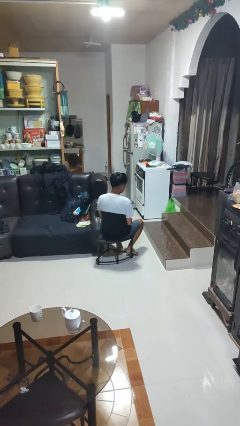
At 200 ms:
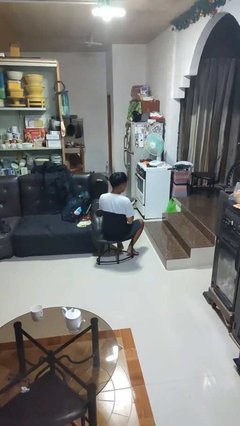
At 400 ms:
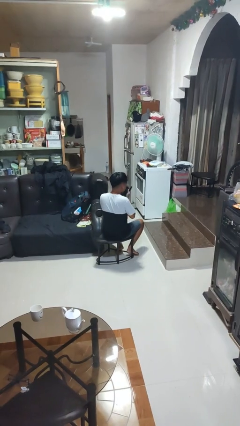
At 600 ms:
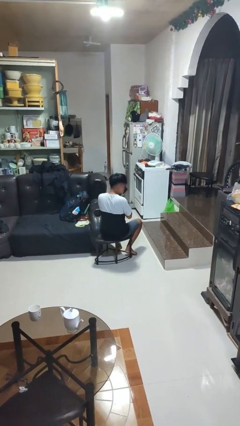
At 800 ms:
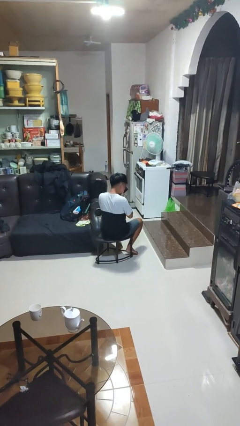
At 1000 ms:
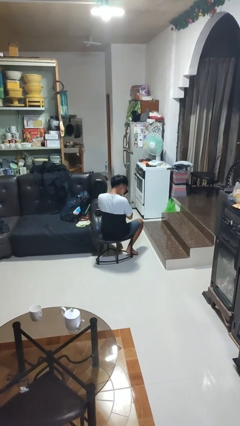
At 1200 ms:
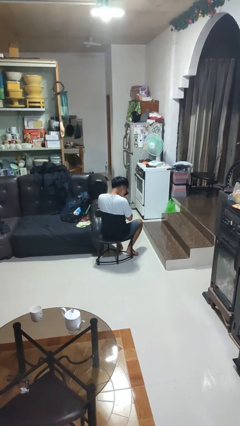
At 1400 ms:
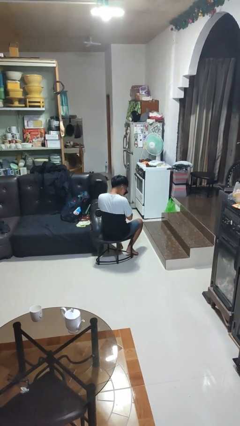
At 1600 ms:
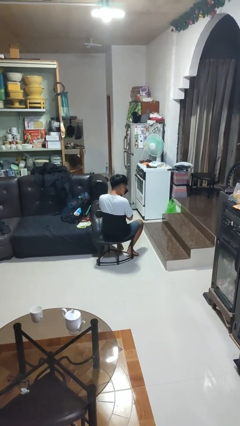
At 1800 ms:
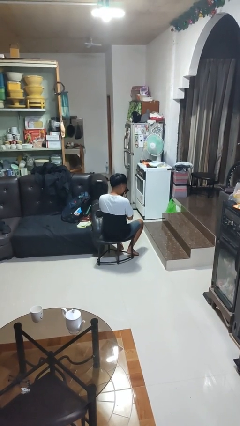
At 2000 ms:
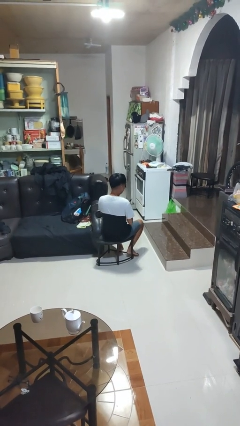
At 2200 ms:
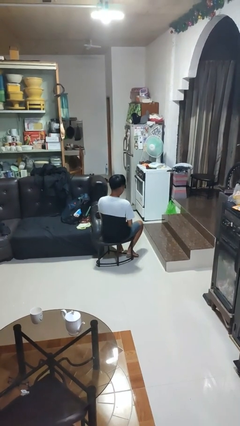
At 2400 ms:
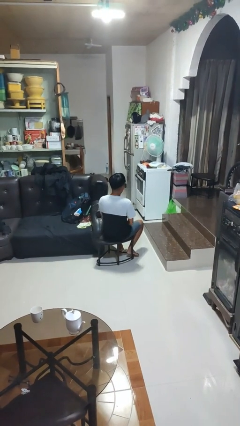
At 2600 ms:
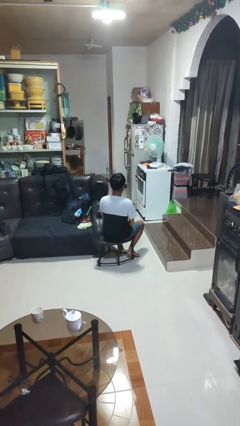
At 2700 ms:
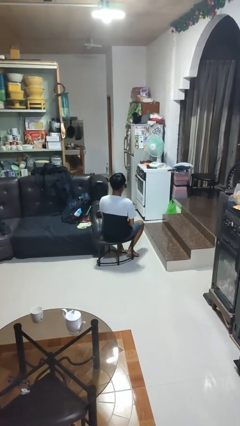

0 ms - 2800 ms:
person blows nose

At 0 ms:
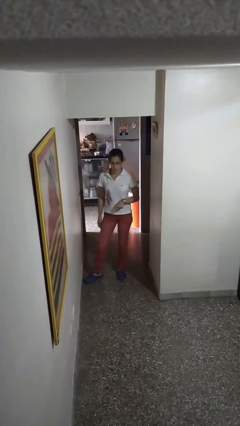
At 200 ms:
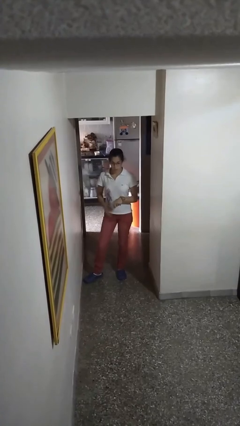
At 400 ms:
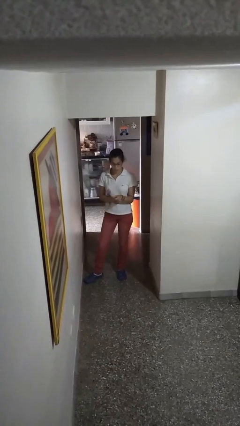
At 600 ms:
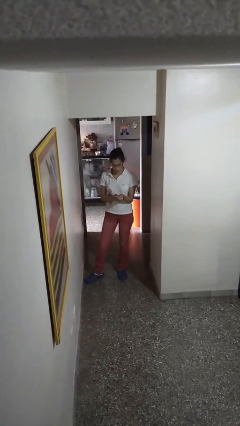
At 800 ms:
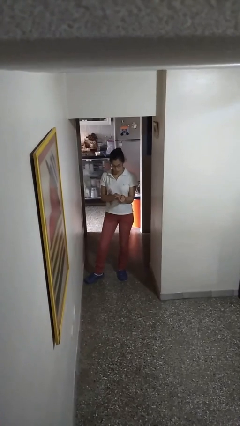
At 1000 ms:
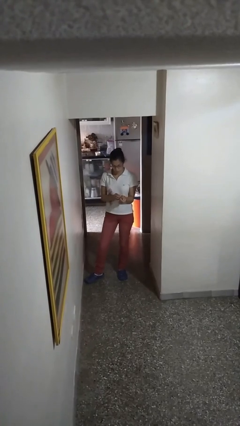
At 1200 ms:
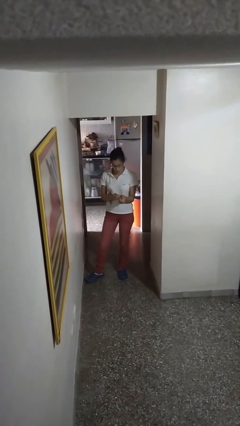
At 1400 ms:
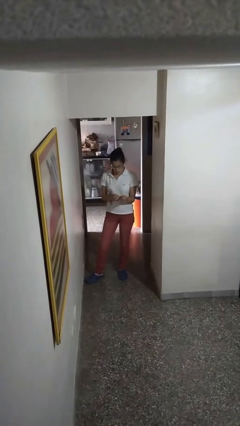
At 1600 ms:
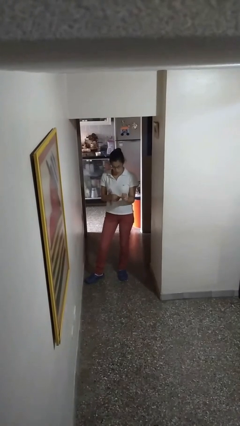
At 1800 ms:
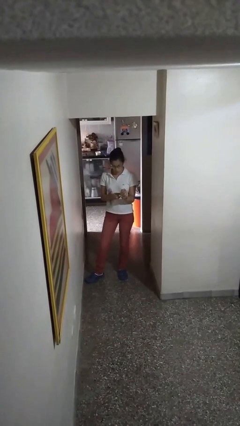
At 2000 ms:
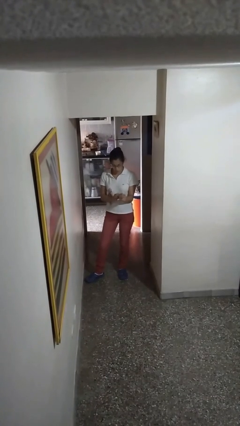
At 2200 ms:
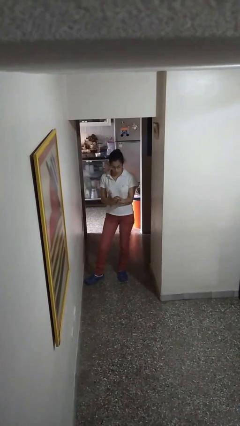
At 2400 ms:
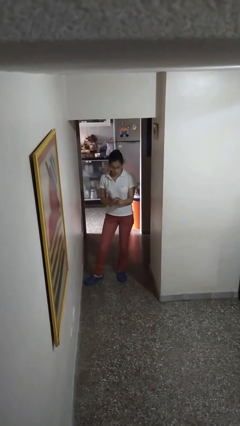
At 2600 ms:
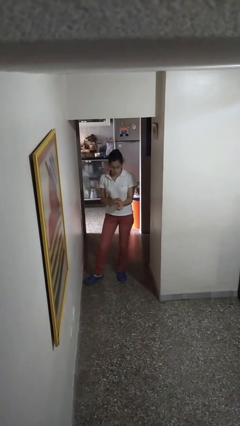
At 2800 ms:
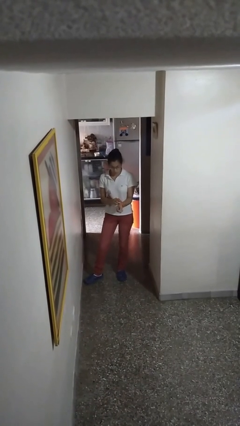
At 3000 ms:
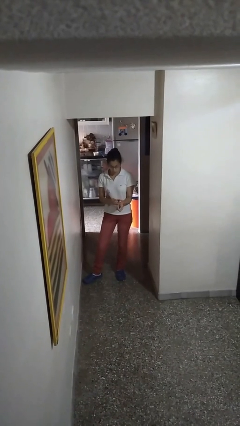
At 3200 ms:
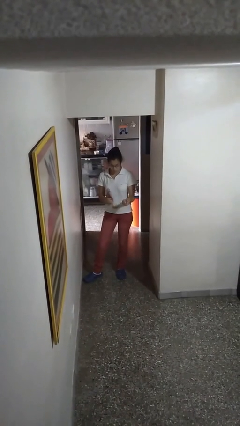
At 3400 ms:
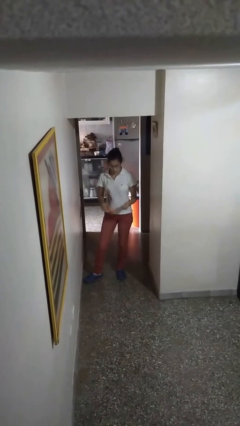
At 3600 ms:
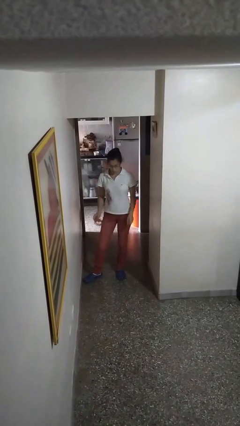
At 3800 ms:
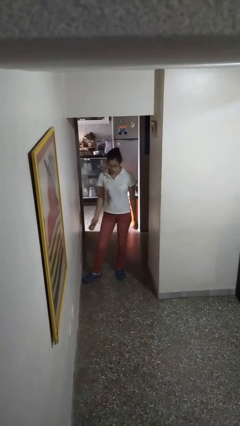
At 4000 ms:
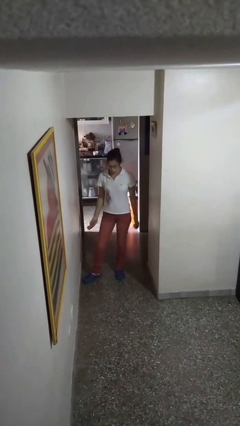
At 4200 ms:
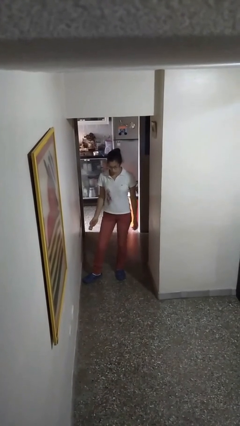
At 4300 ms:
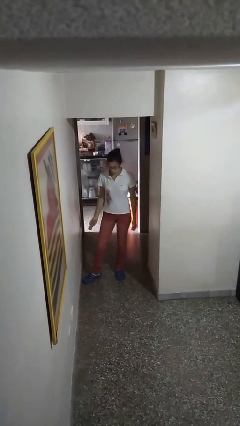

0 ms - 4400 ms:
person takes off wristwatch

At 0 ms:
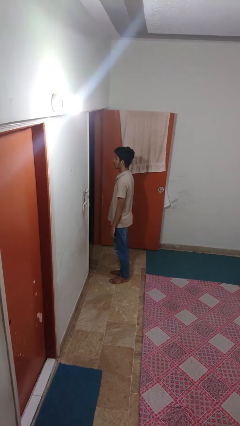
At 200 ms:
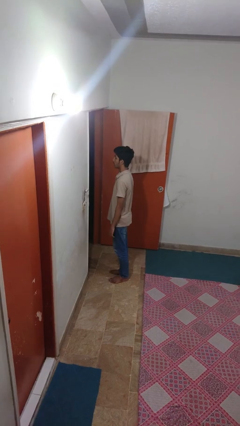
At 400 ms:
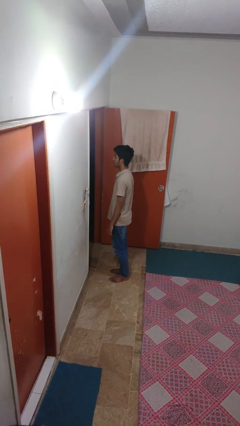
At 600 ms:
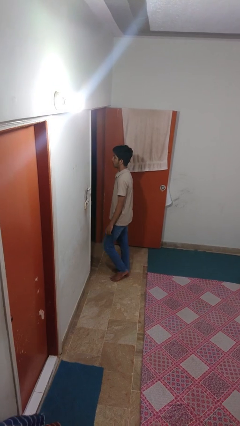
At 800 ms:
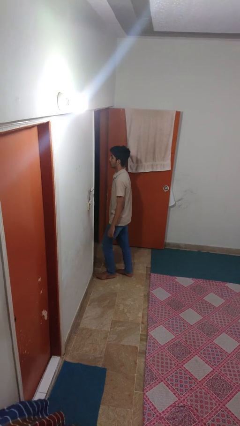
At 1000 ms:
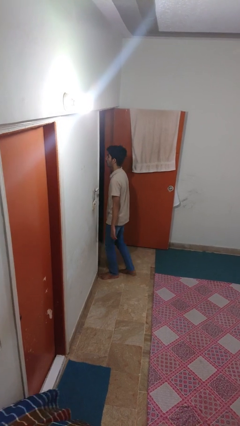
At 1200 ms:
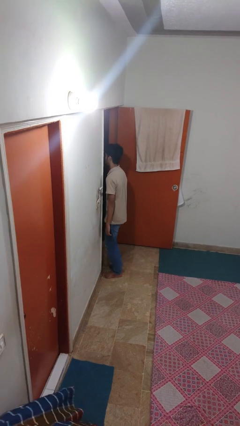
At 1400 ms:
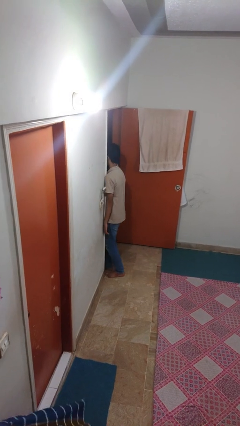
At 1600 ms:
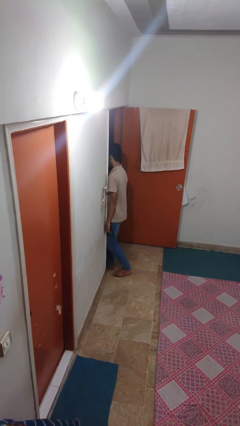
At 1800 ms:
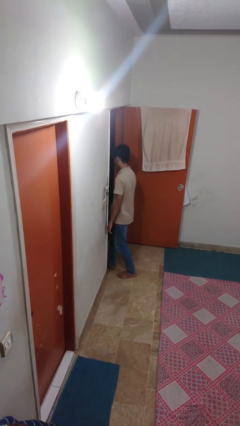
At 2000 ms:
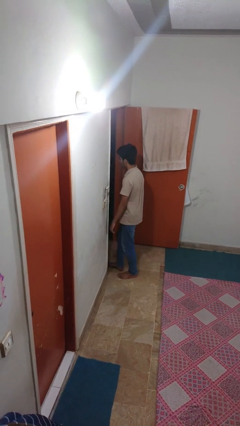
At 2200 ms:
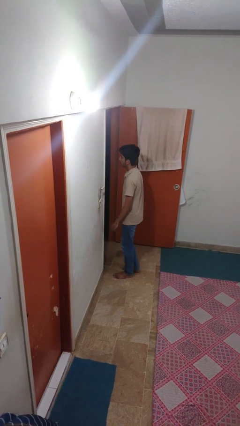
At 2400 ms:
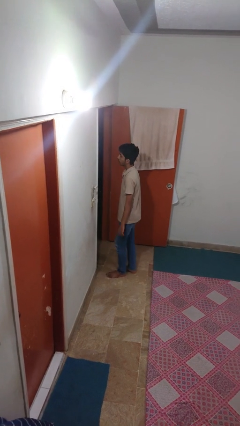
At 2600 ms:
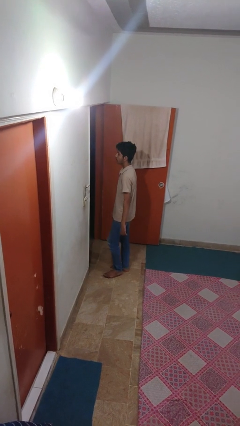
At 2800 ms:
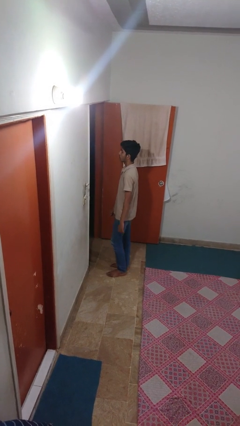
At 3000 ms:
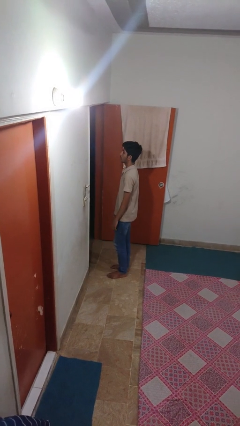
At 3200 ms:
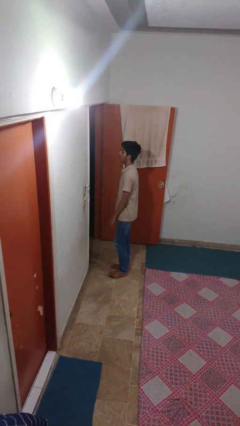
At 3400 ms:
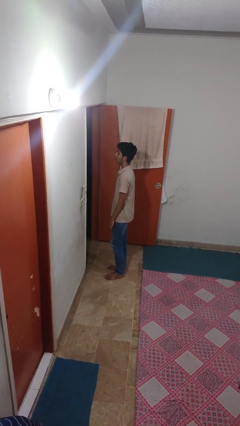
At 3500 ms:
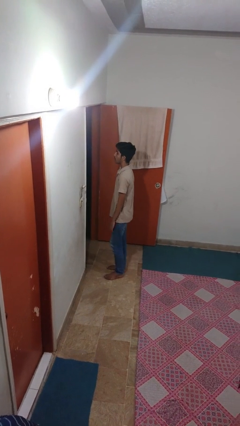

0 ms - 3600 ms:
person bumps into wall

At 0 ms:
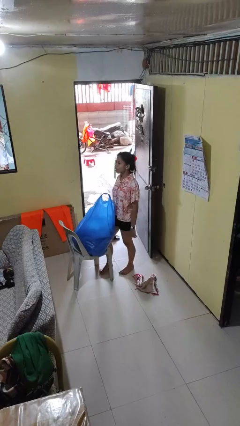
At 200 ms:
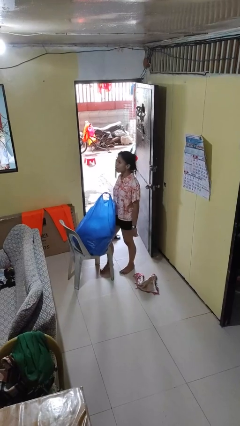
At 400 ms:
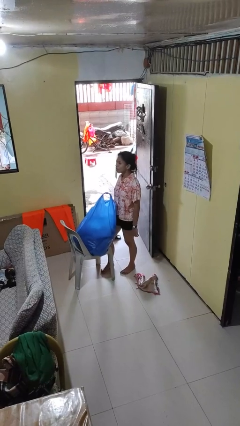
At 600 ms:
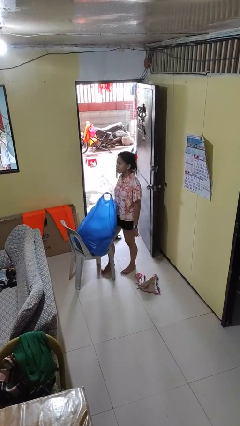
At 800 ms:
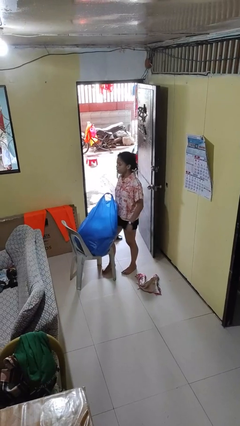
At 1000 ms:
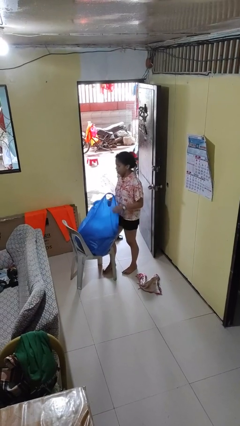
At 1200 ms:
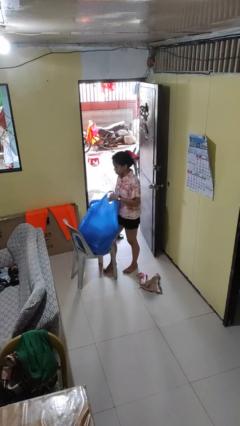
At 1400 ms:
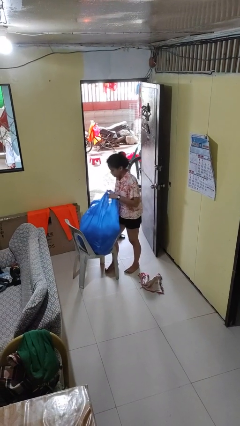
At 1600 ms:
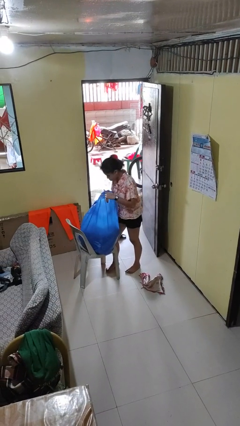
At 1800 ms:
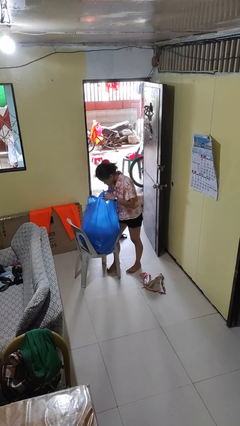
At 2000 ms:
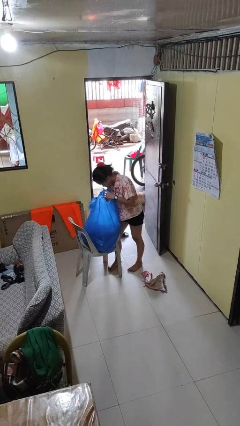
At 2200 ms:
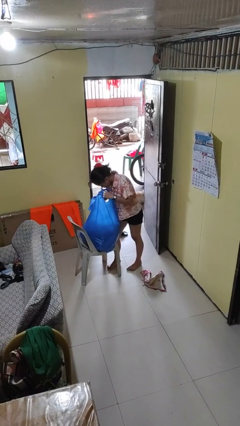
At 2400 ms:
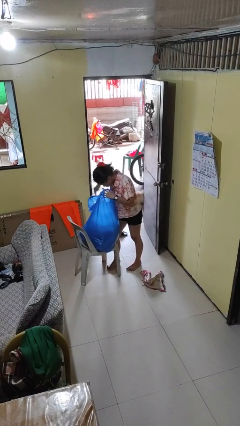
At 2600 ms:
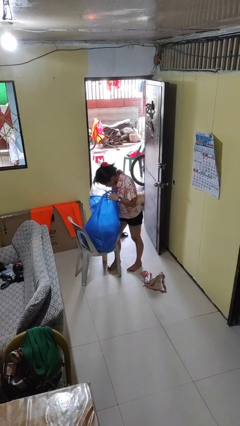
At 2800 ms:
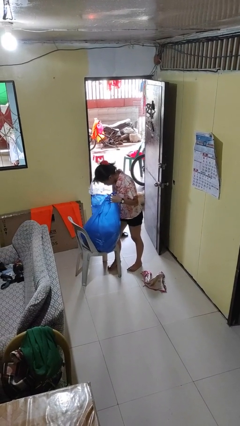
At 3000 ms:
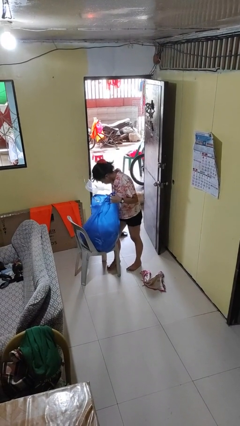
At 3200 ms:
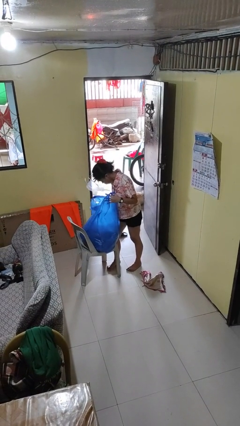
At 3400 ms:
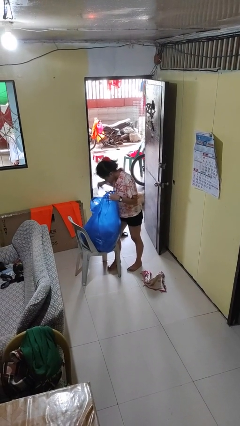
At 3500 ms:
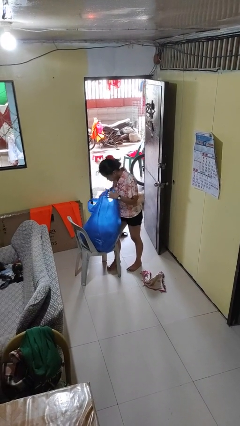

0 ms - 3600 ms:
person searches in bag

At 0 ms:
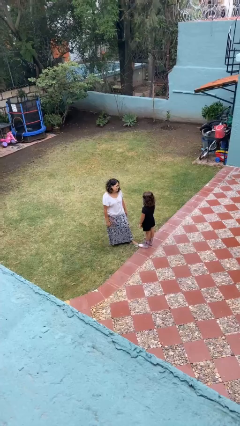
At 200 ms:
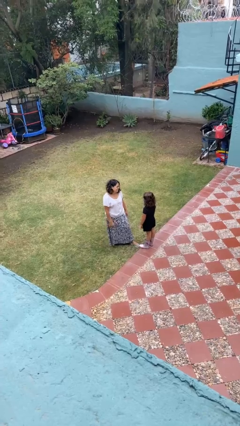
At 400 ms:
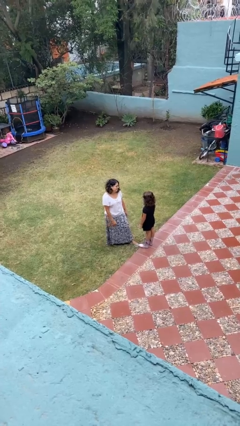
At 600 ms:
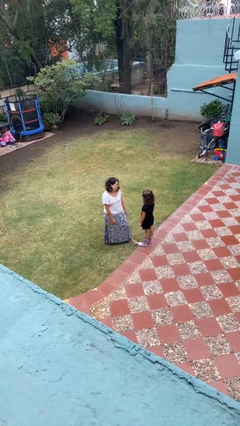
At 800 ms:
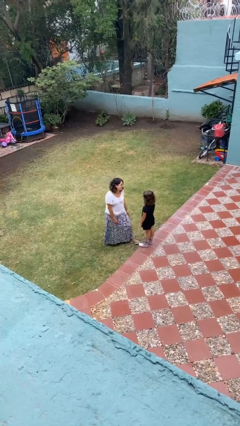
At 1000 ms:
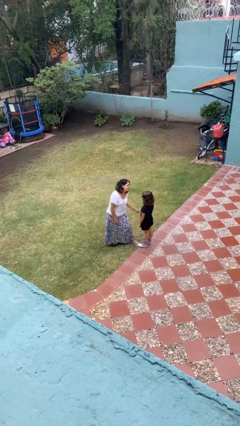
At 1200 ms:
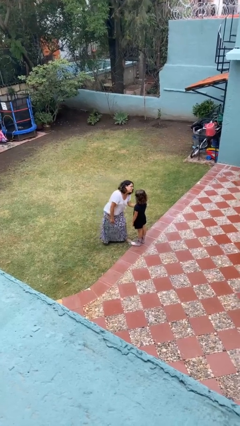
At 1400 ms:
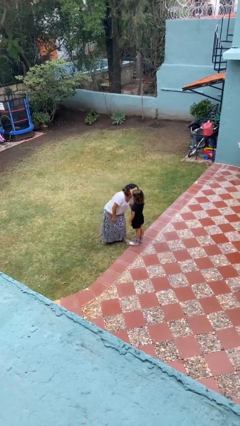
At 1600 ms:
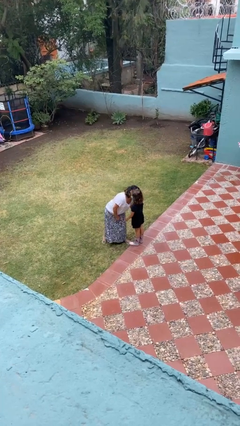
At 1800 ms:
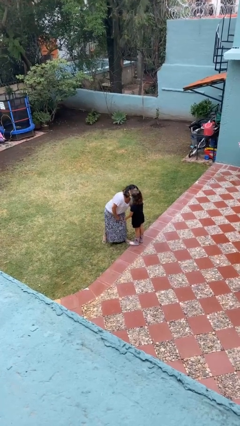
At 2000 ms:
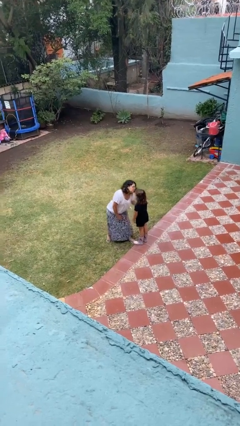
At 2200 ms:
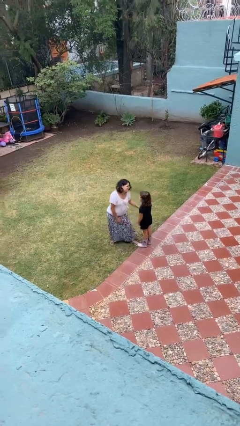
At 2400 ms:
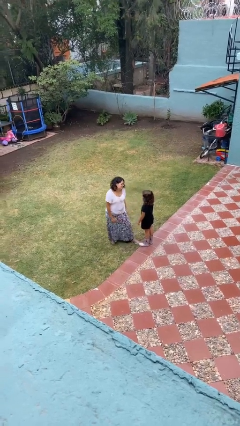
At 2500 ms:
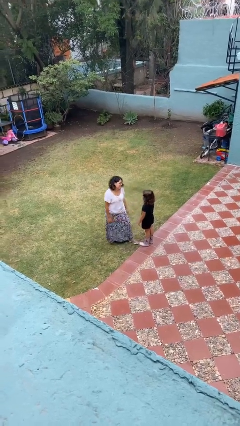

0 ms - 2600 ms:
person kisses cheek of person

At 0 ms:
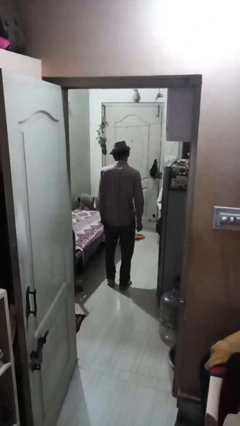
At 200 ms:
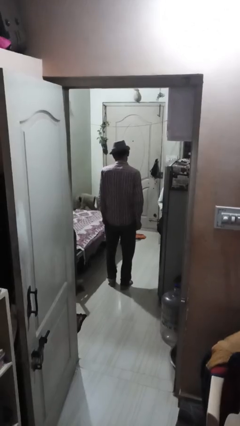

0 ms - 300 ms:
person points at person
